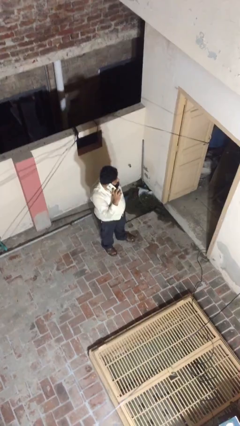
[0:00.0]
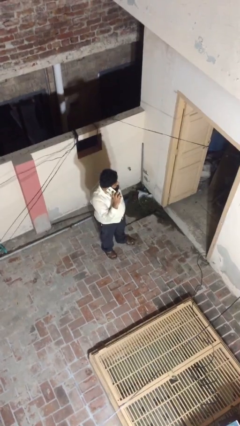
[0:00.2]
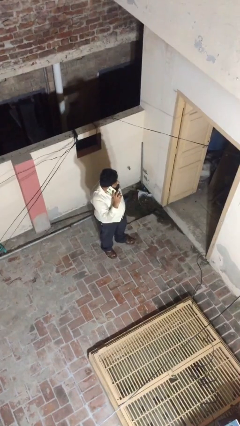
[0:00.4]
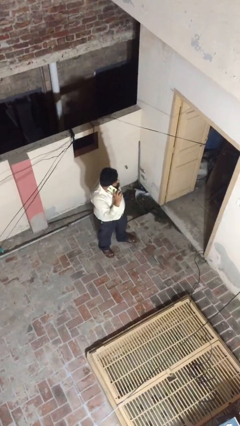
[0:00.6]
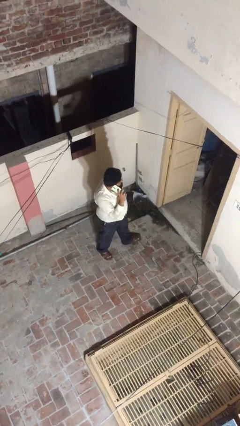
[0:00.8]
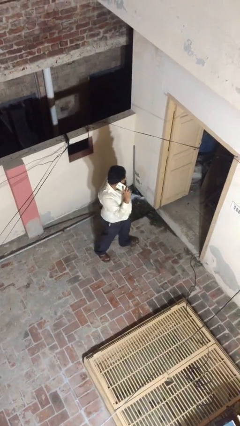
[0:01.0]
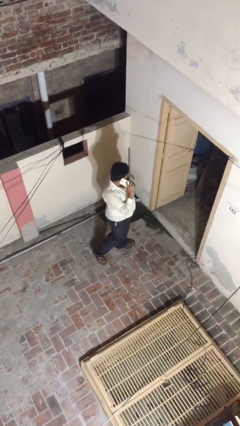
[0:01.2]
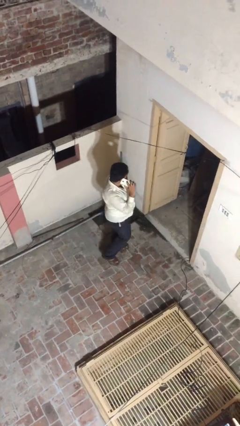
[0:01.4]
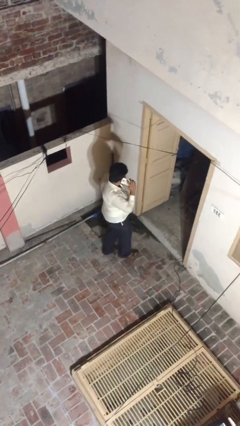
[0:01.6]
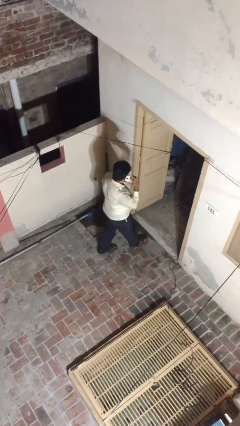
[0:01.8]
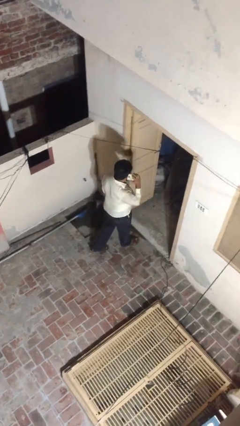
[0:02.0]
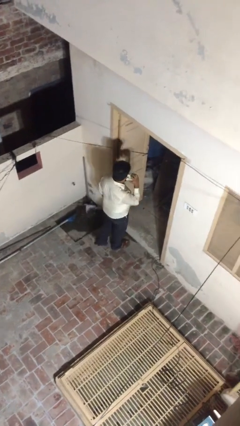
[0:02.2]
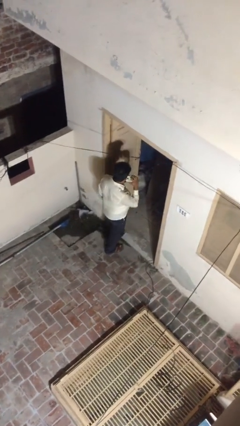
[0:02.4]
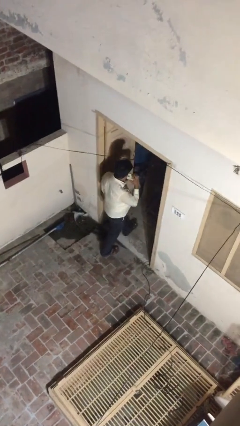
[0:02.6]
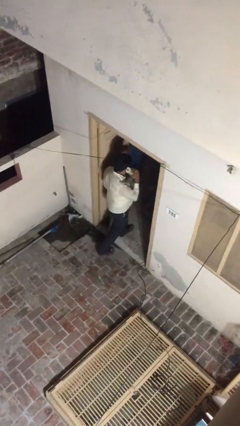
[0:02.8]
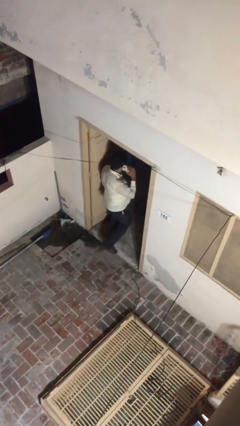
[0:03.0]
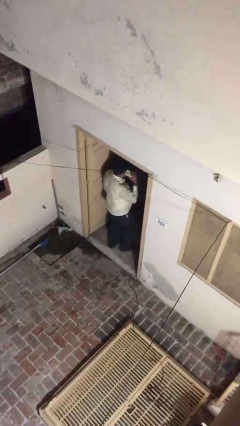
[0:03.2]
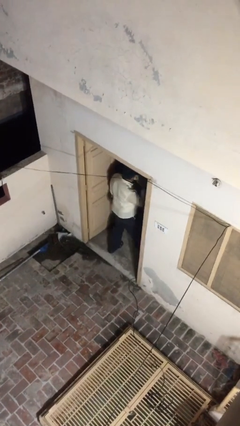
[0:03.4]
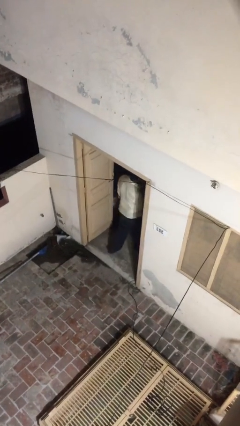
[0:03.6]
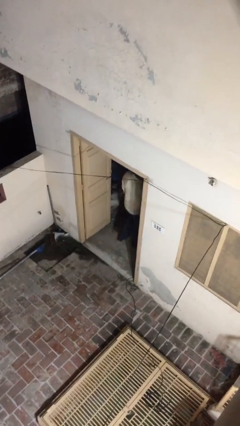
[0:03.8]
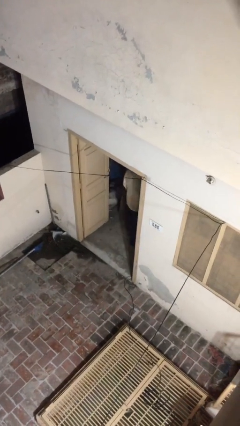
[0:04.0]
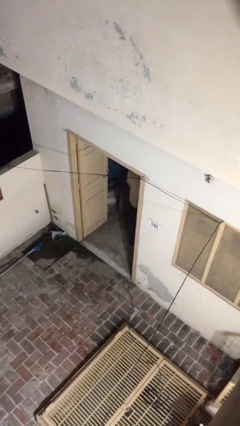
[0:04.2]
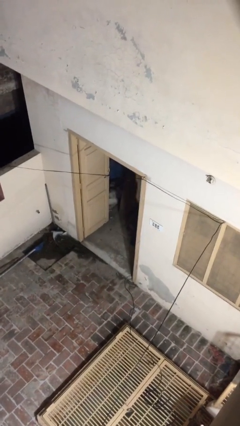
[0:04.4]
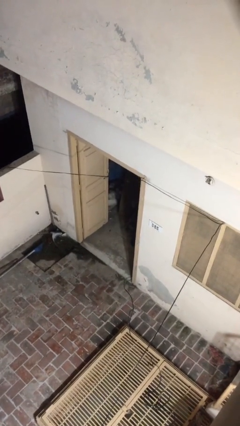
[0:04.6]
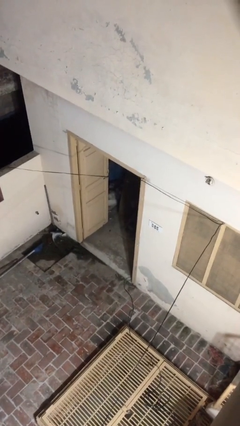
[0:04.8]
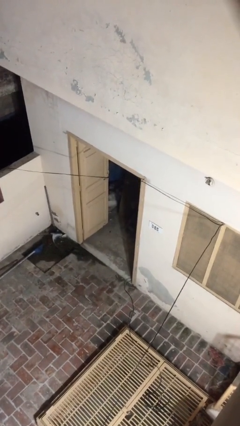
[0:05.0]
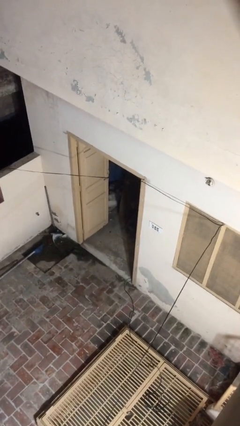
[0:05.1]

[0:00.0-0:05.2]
person exits scene through structure

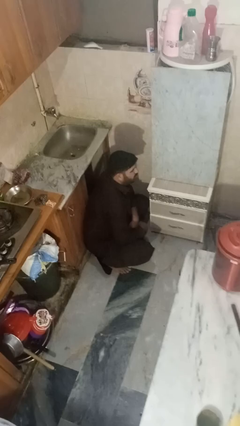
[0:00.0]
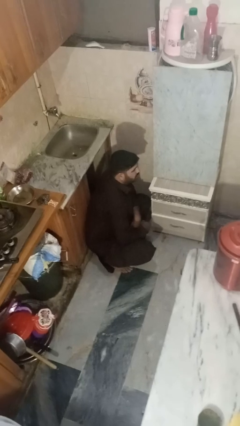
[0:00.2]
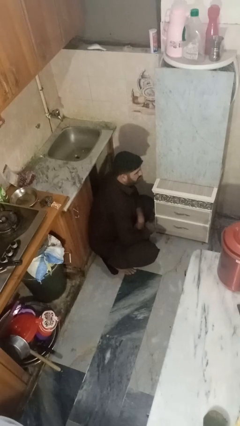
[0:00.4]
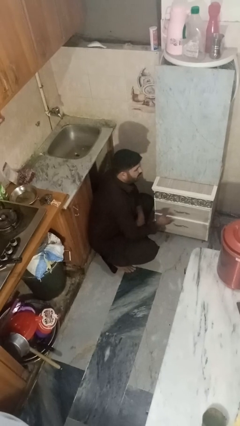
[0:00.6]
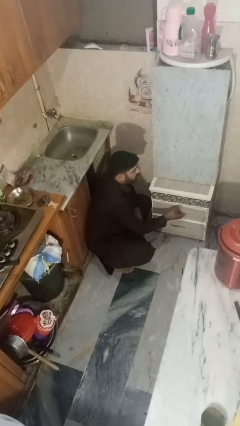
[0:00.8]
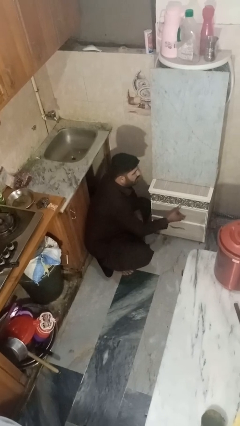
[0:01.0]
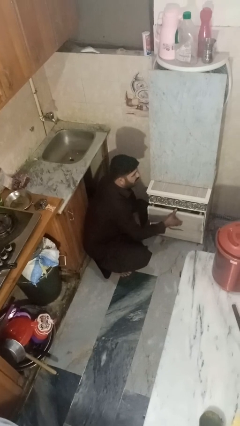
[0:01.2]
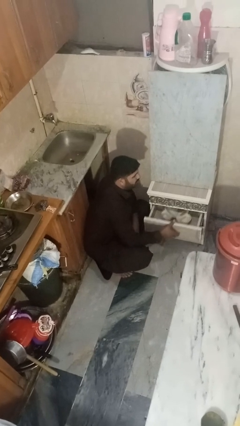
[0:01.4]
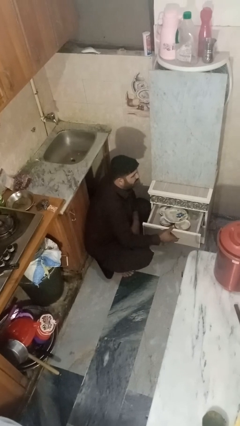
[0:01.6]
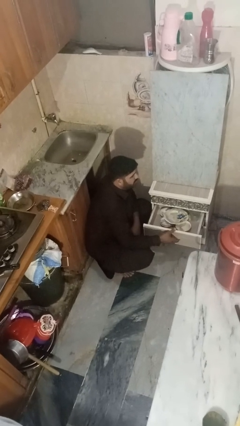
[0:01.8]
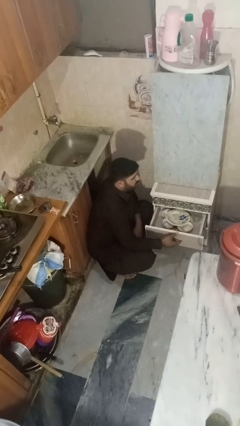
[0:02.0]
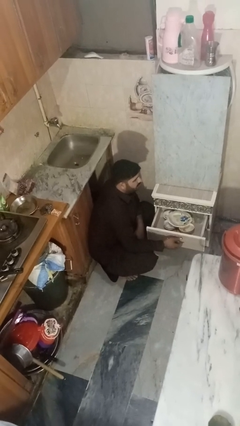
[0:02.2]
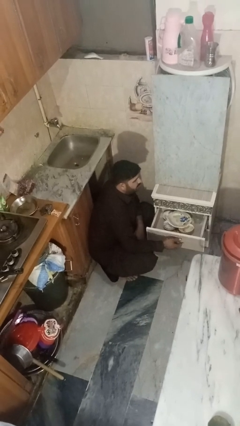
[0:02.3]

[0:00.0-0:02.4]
person opens kitchen drawer

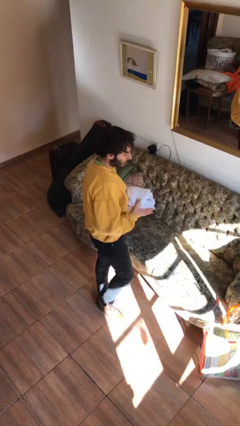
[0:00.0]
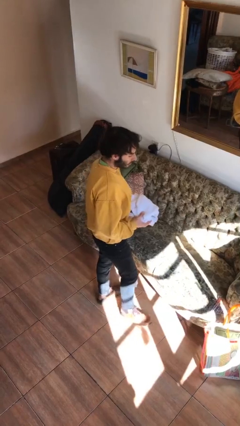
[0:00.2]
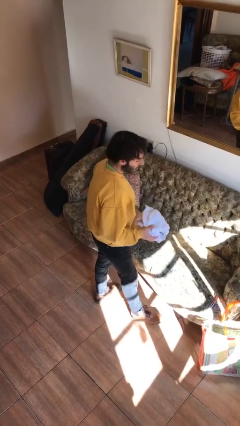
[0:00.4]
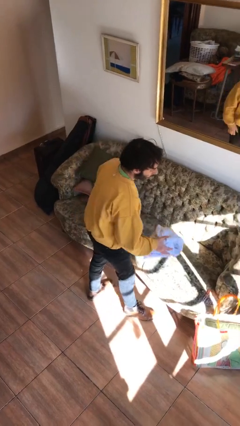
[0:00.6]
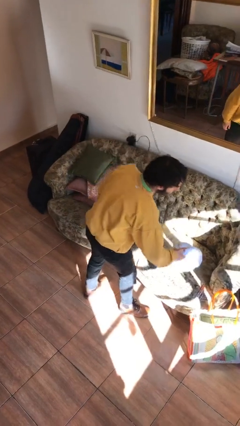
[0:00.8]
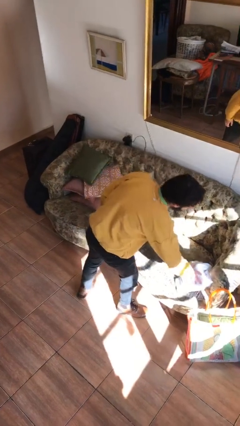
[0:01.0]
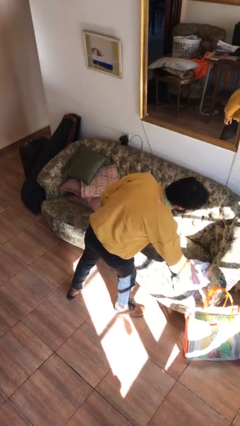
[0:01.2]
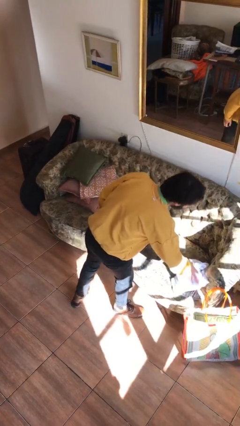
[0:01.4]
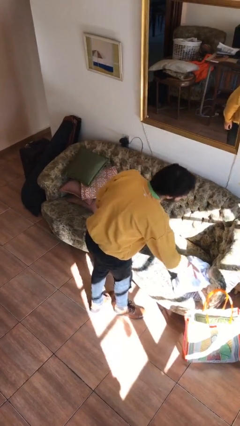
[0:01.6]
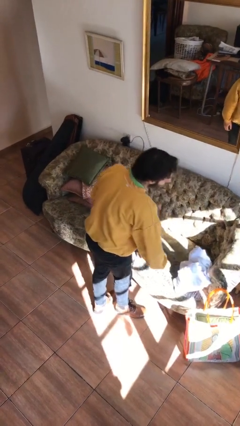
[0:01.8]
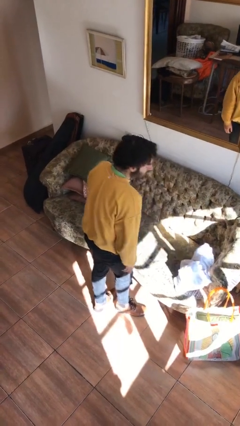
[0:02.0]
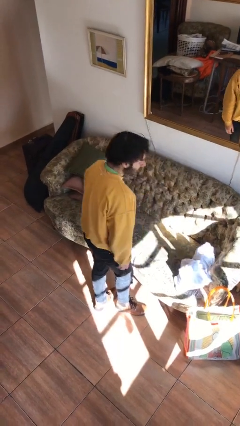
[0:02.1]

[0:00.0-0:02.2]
person puts down object on couch

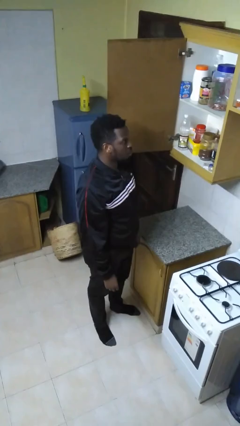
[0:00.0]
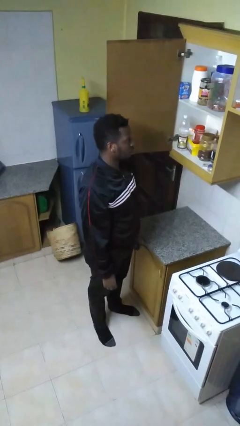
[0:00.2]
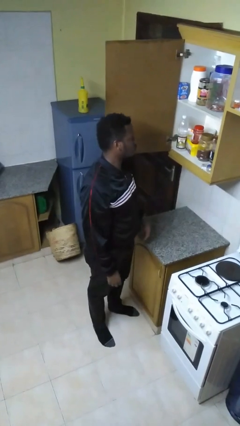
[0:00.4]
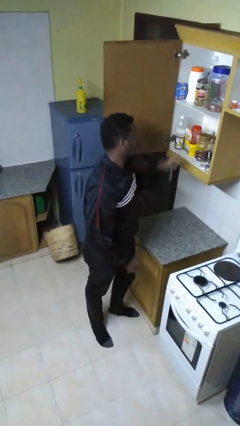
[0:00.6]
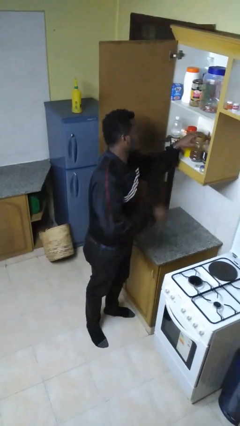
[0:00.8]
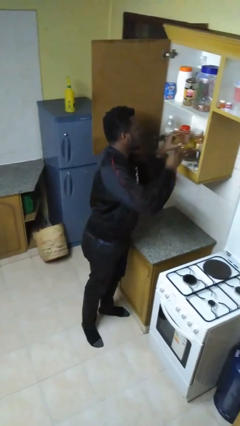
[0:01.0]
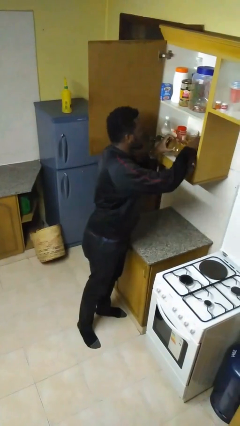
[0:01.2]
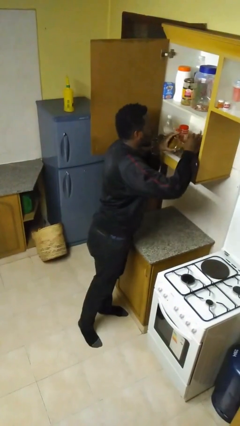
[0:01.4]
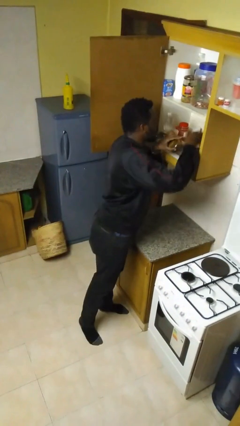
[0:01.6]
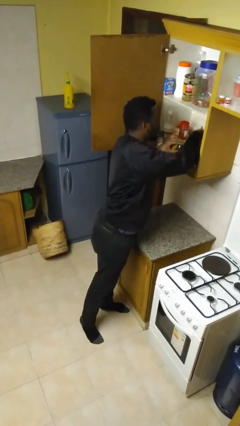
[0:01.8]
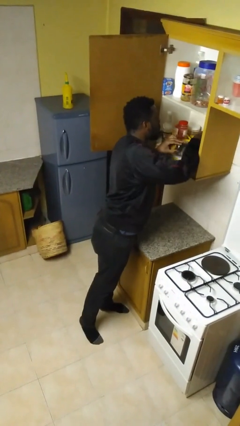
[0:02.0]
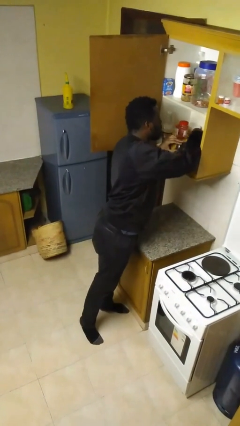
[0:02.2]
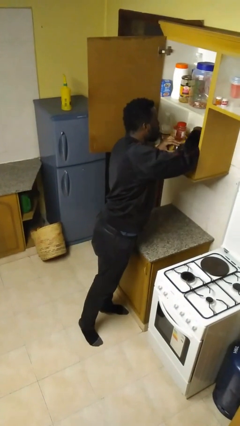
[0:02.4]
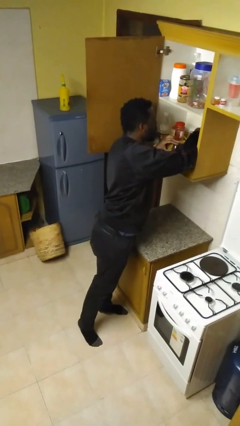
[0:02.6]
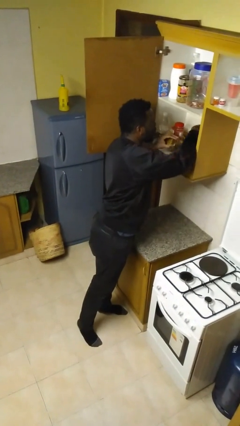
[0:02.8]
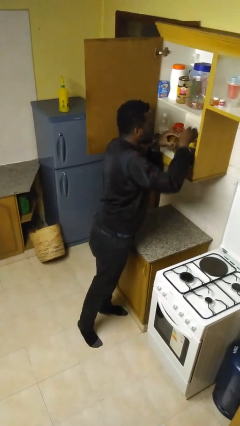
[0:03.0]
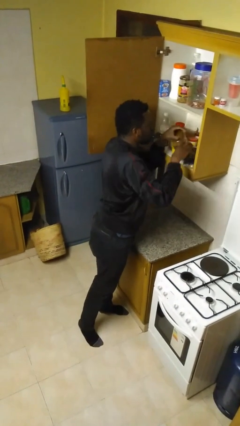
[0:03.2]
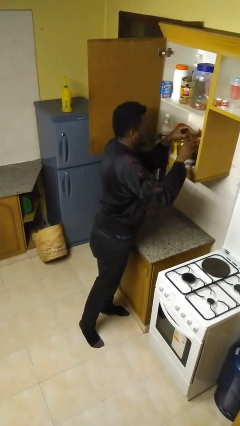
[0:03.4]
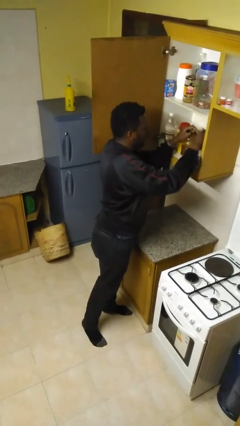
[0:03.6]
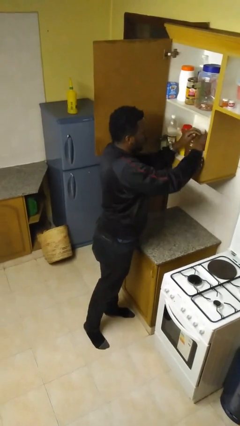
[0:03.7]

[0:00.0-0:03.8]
person searches in cabinet

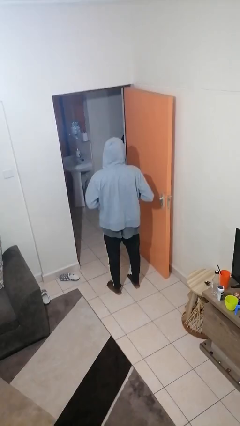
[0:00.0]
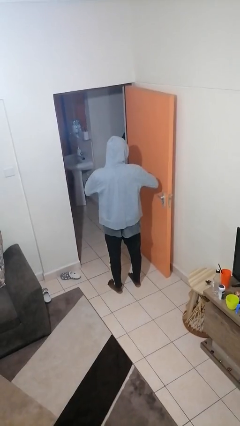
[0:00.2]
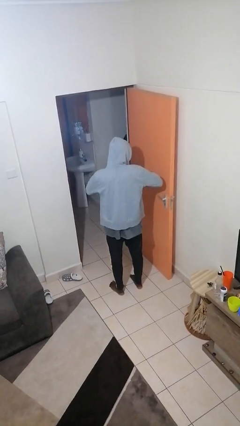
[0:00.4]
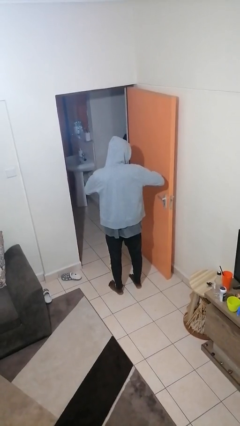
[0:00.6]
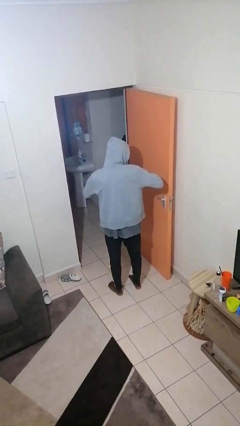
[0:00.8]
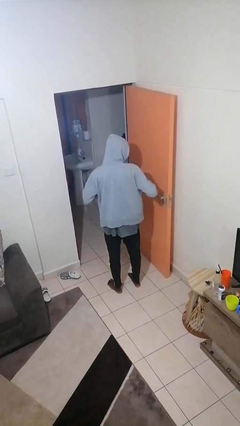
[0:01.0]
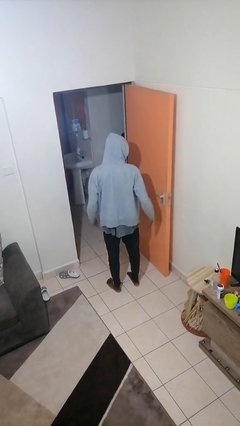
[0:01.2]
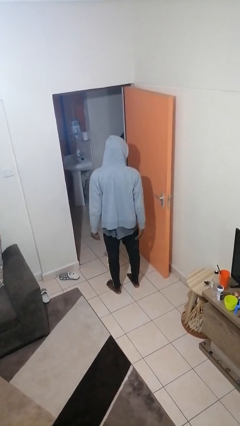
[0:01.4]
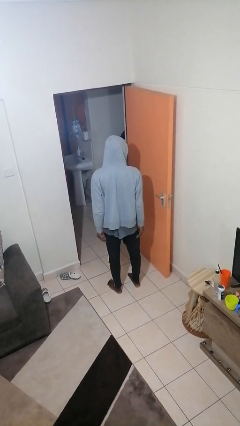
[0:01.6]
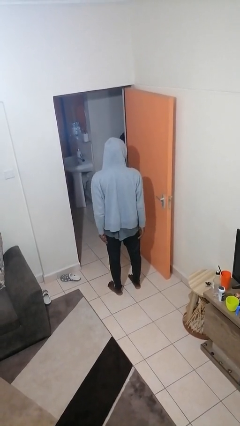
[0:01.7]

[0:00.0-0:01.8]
person takes off ring

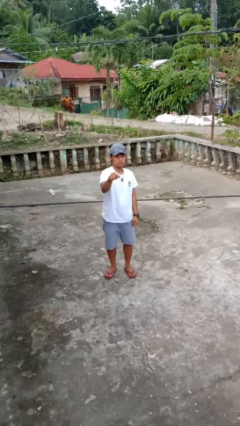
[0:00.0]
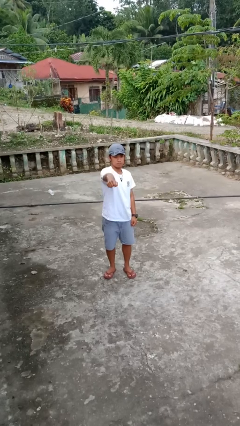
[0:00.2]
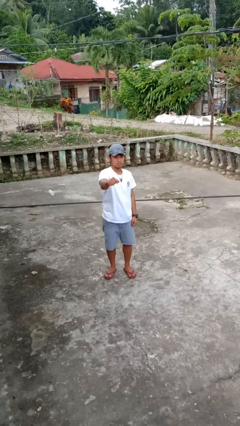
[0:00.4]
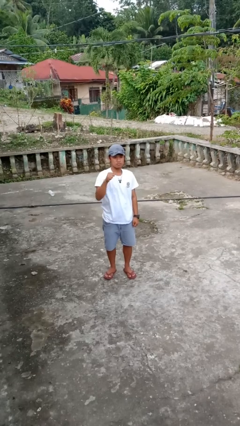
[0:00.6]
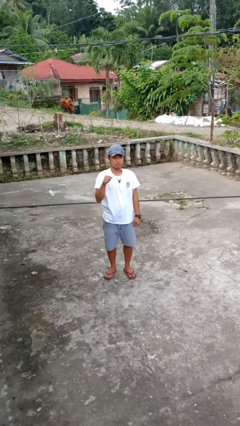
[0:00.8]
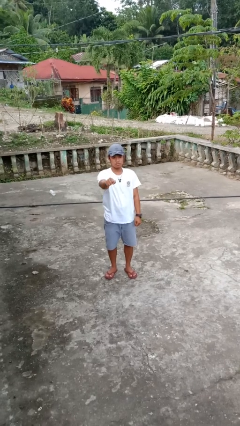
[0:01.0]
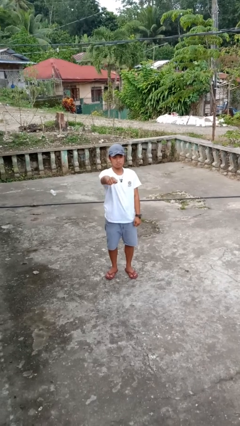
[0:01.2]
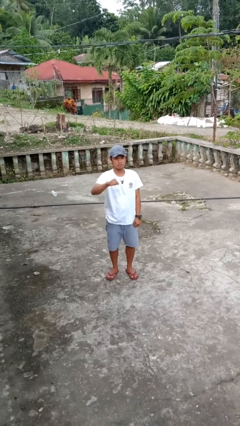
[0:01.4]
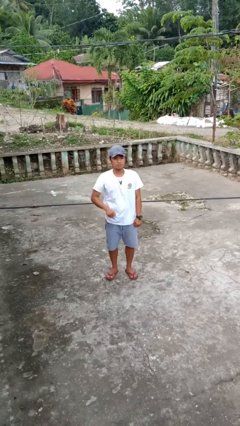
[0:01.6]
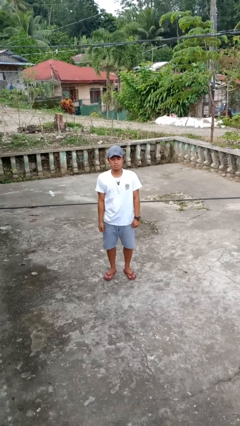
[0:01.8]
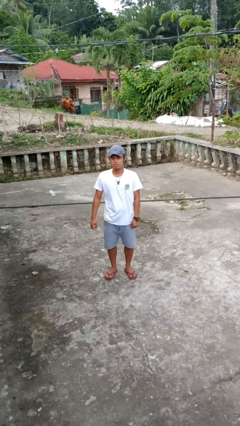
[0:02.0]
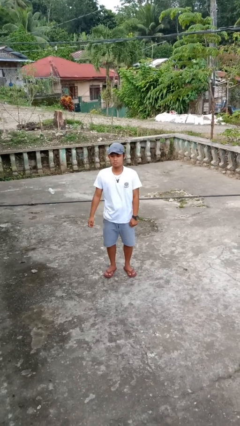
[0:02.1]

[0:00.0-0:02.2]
person punches
